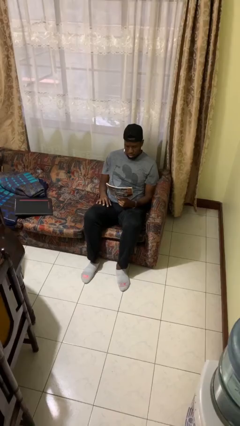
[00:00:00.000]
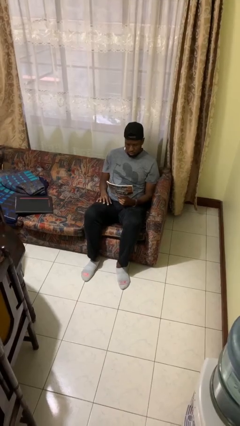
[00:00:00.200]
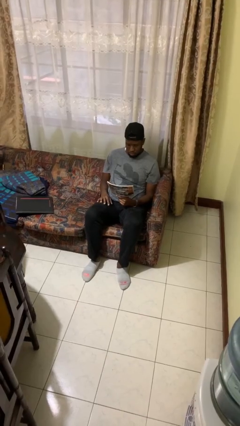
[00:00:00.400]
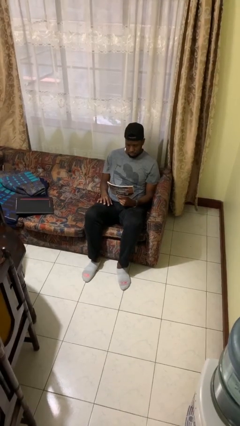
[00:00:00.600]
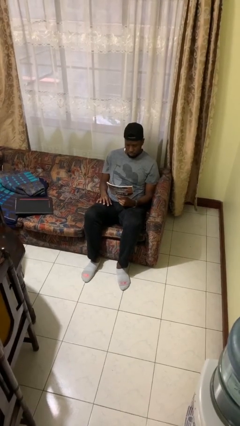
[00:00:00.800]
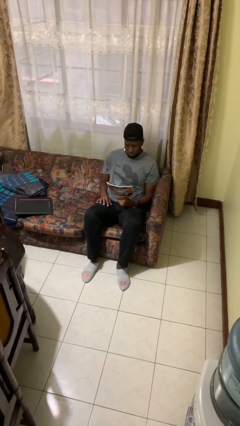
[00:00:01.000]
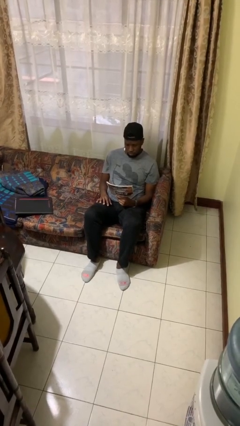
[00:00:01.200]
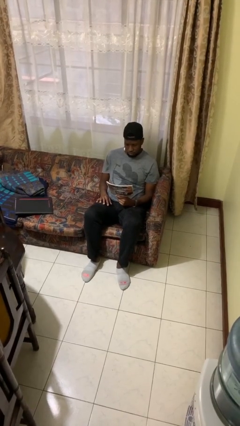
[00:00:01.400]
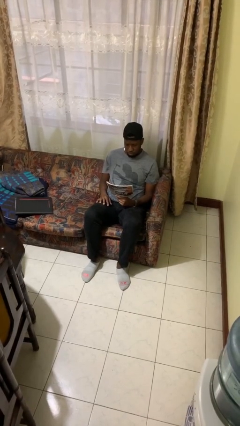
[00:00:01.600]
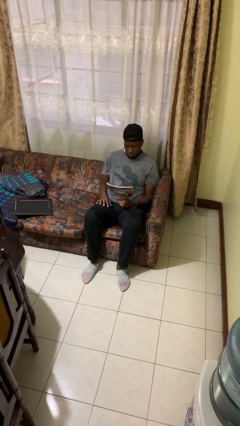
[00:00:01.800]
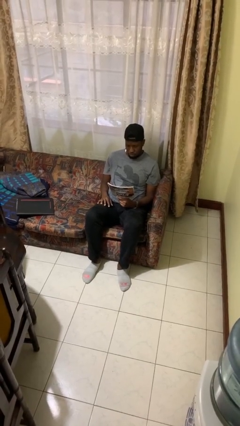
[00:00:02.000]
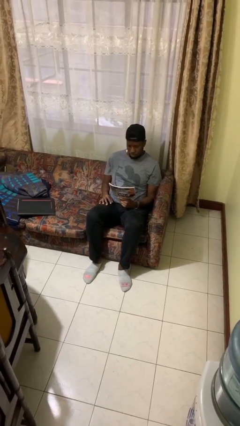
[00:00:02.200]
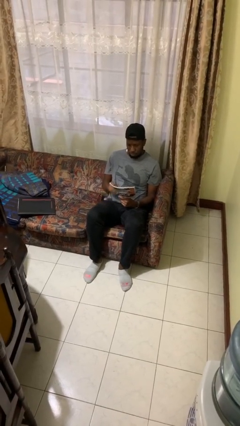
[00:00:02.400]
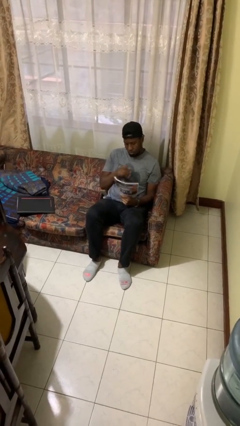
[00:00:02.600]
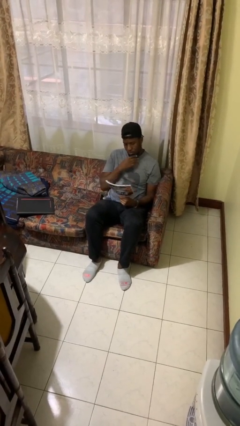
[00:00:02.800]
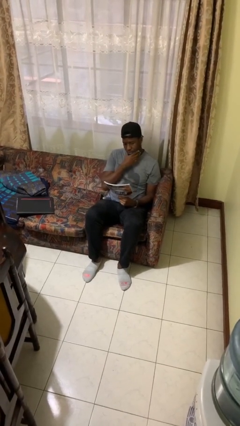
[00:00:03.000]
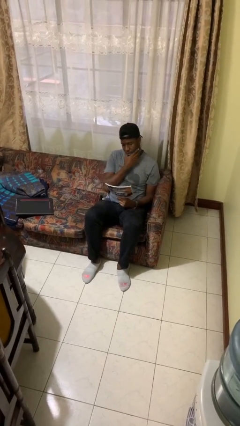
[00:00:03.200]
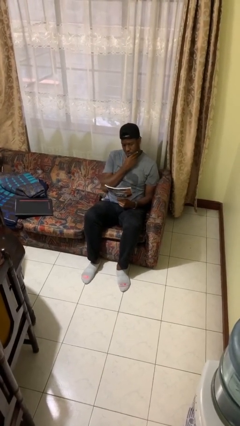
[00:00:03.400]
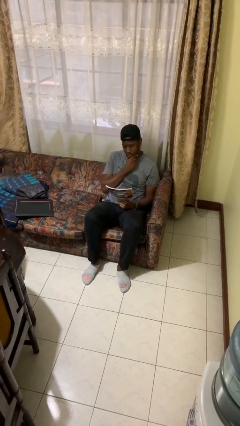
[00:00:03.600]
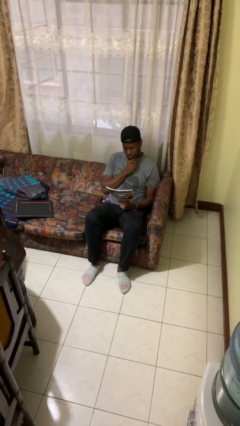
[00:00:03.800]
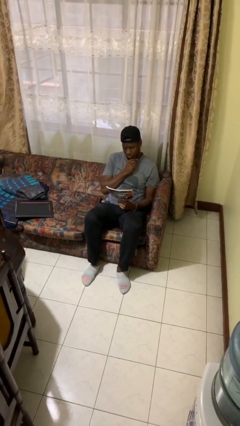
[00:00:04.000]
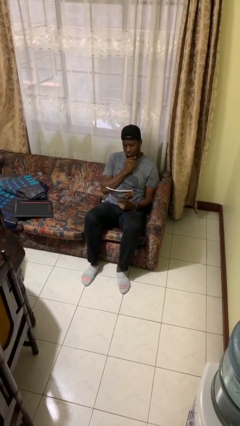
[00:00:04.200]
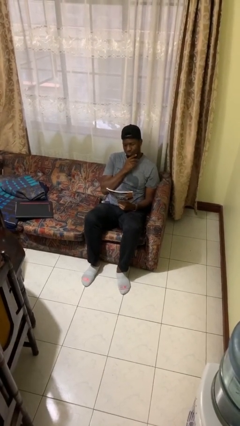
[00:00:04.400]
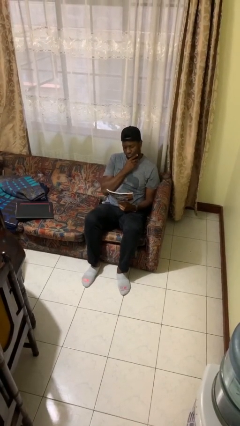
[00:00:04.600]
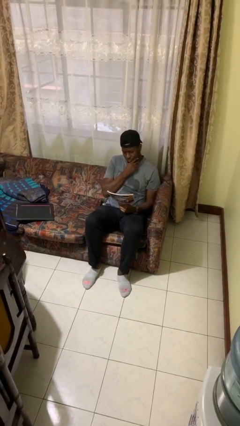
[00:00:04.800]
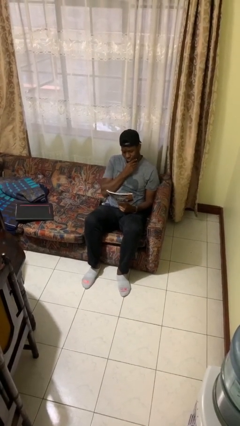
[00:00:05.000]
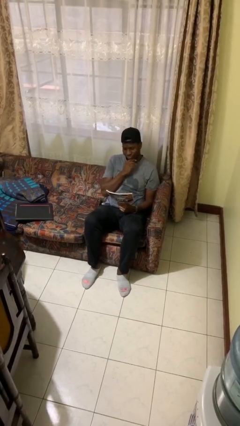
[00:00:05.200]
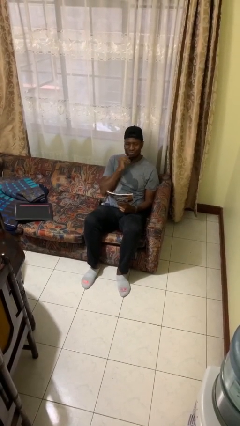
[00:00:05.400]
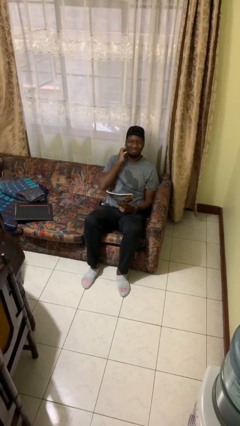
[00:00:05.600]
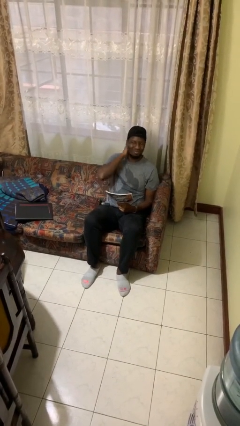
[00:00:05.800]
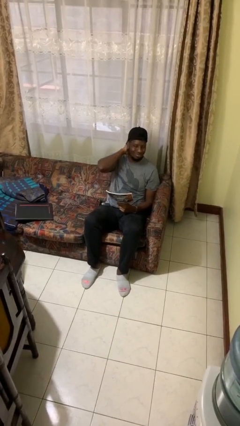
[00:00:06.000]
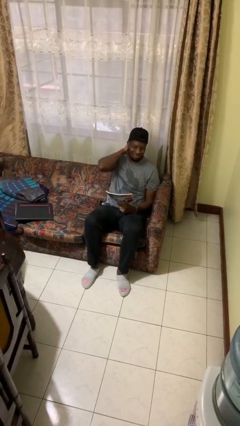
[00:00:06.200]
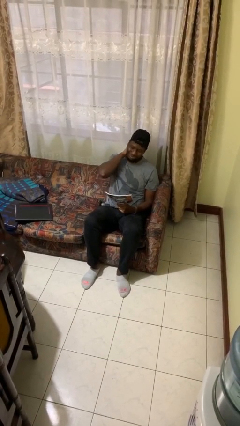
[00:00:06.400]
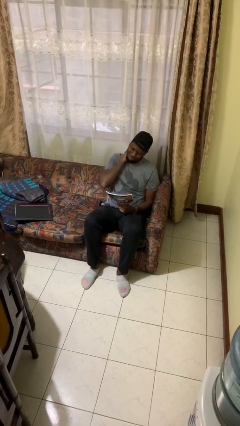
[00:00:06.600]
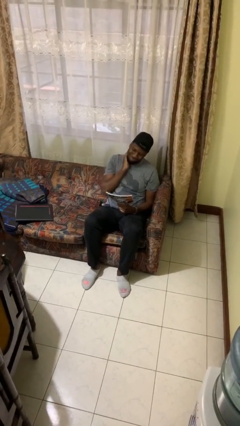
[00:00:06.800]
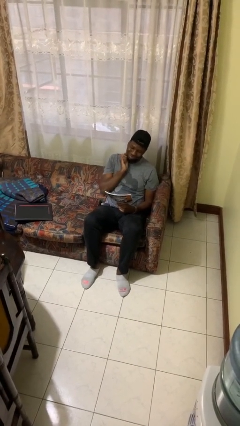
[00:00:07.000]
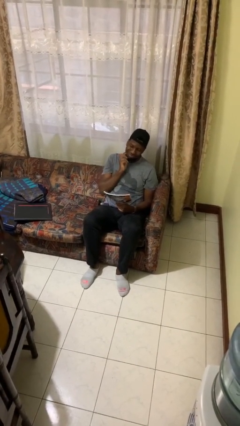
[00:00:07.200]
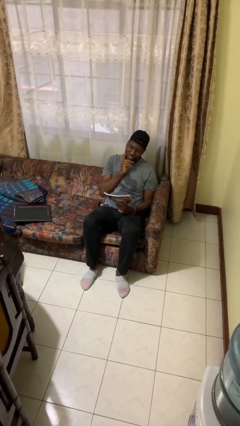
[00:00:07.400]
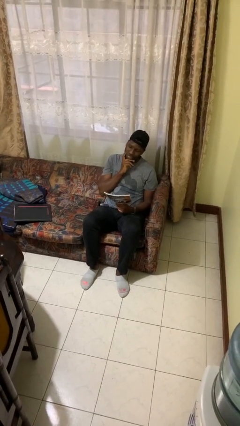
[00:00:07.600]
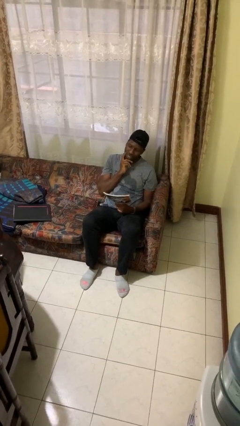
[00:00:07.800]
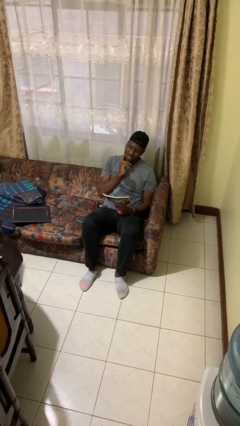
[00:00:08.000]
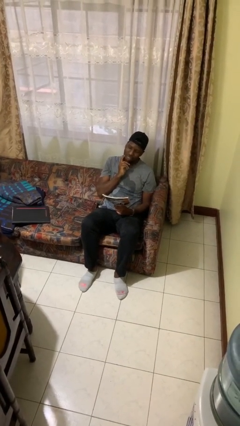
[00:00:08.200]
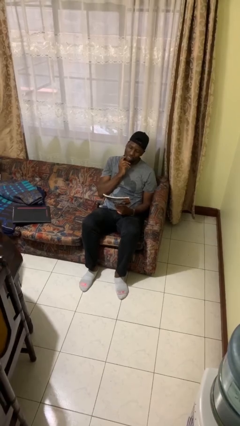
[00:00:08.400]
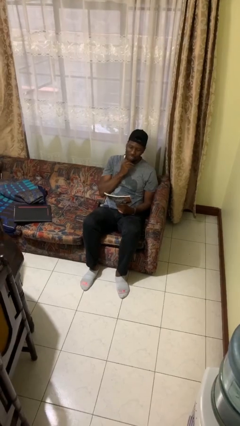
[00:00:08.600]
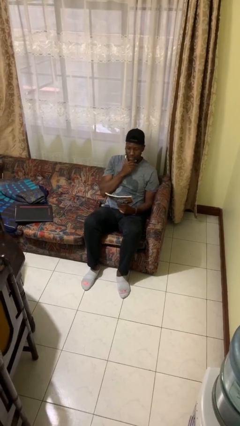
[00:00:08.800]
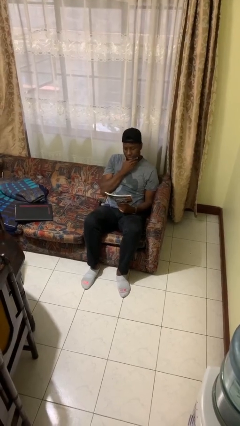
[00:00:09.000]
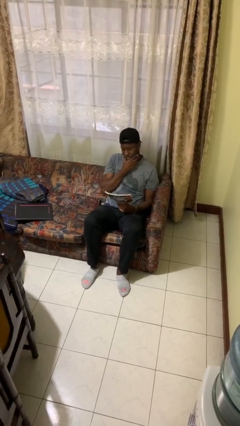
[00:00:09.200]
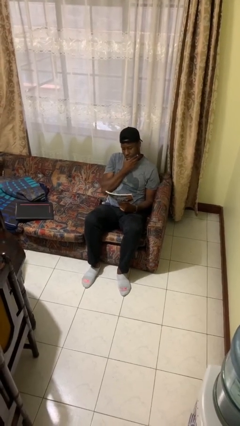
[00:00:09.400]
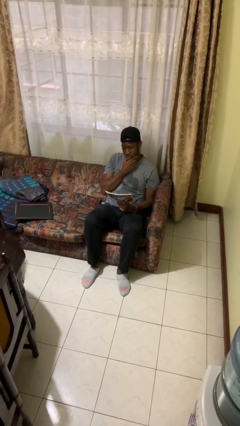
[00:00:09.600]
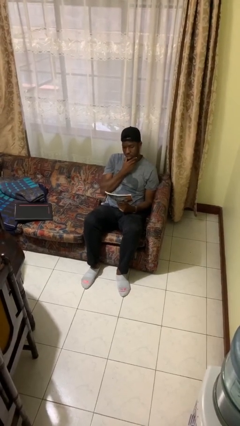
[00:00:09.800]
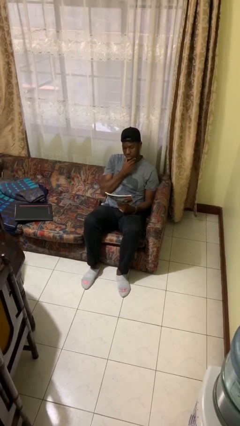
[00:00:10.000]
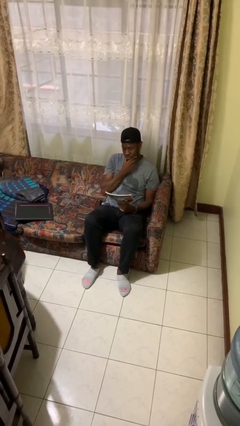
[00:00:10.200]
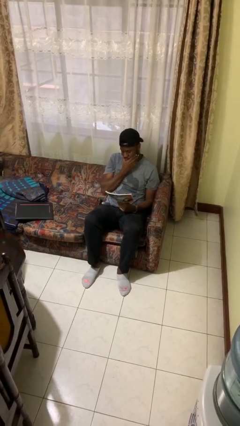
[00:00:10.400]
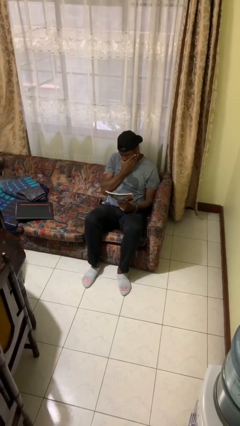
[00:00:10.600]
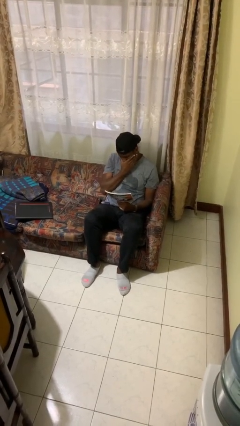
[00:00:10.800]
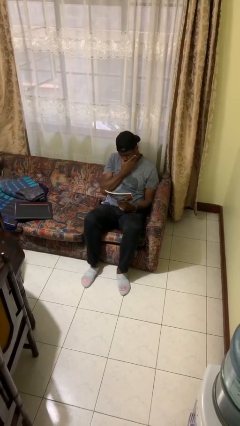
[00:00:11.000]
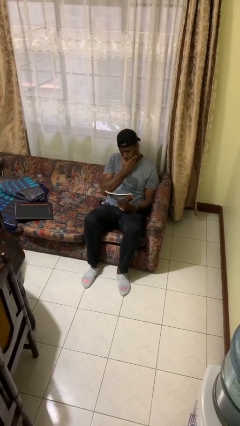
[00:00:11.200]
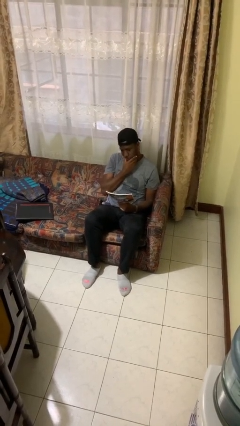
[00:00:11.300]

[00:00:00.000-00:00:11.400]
person reads document

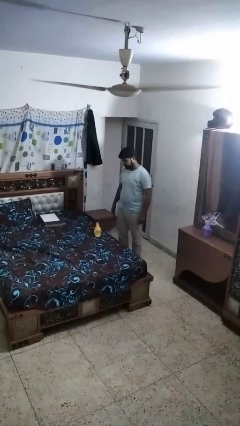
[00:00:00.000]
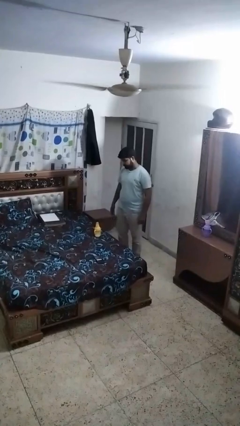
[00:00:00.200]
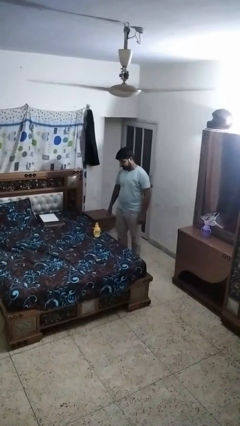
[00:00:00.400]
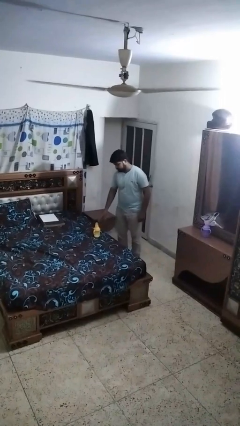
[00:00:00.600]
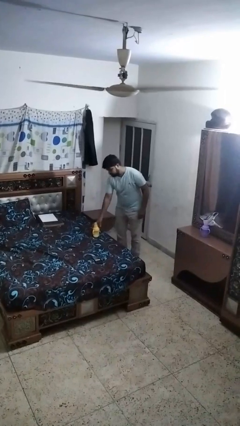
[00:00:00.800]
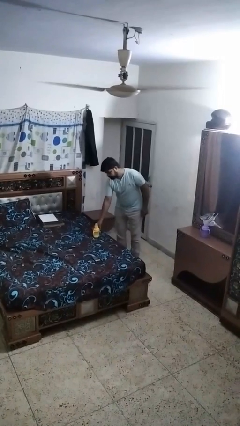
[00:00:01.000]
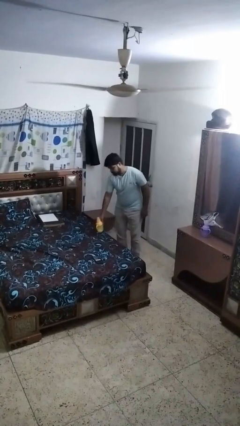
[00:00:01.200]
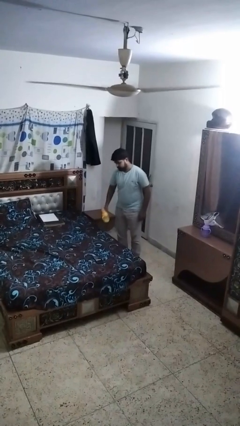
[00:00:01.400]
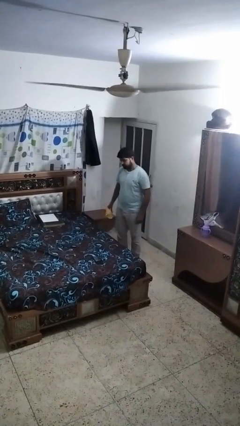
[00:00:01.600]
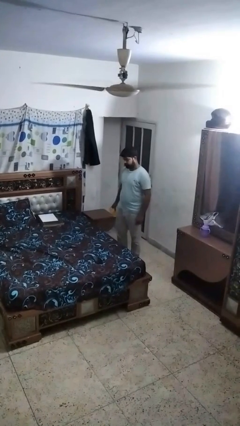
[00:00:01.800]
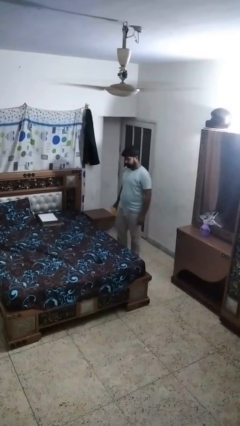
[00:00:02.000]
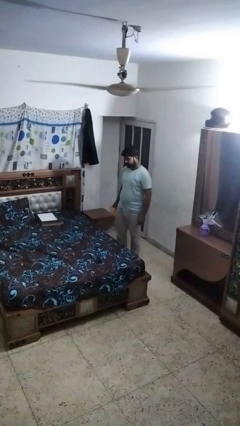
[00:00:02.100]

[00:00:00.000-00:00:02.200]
person picks up object from bed

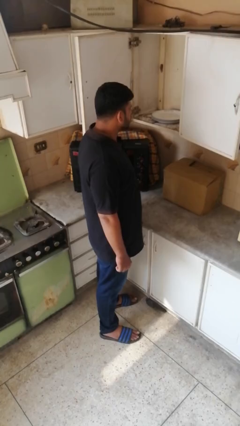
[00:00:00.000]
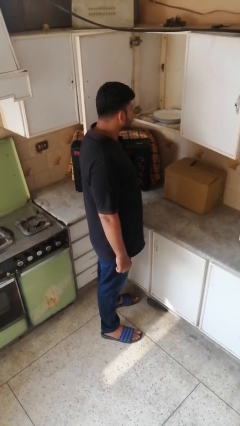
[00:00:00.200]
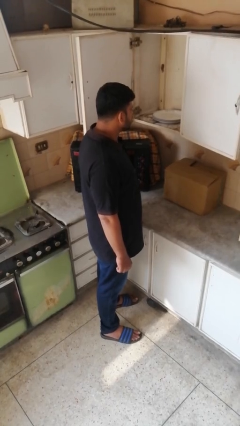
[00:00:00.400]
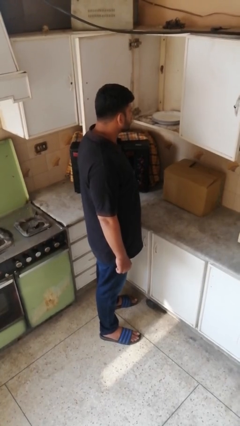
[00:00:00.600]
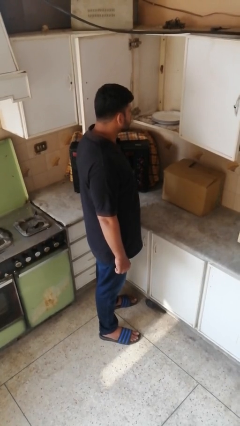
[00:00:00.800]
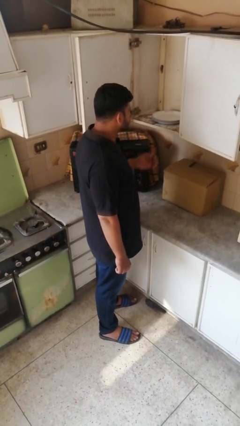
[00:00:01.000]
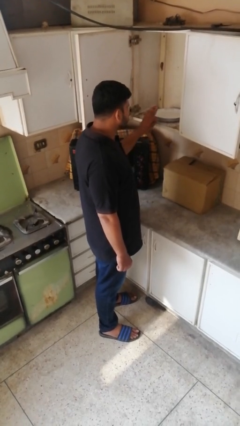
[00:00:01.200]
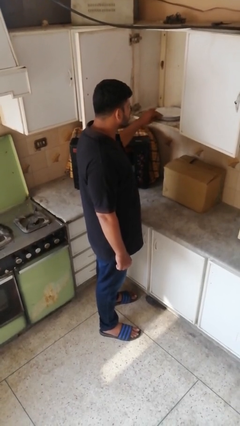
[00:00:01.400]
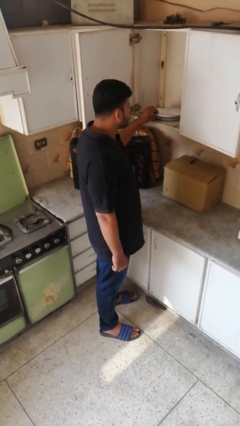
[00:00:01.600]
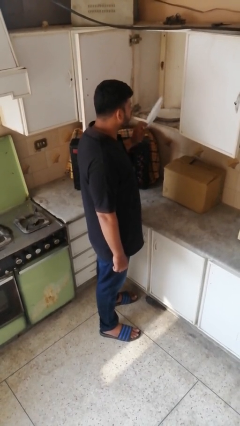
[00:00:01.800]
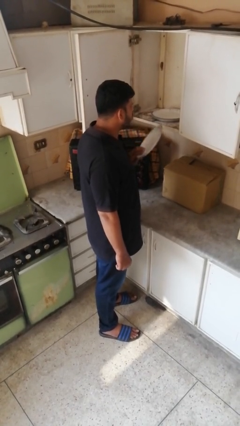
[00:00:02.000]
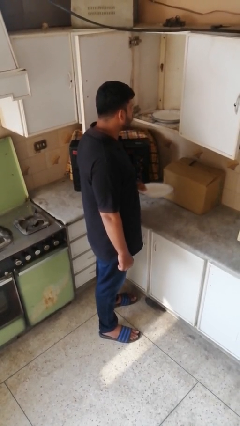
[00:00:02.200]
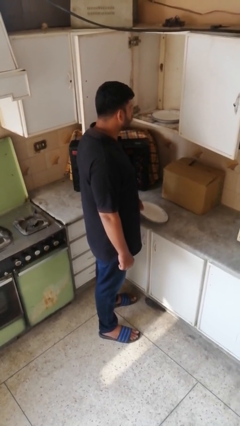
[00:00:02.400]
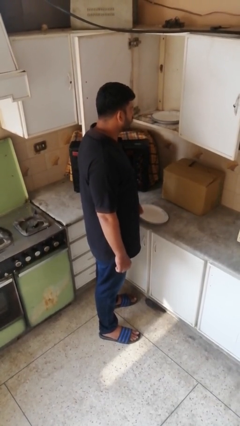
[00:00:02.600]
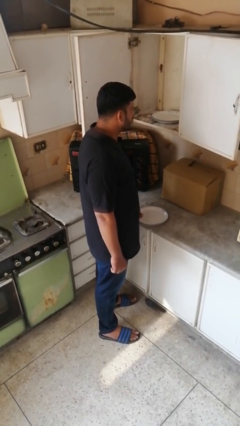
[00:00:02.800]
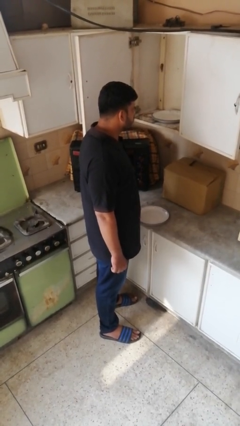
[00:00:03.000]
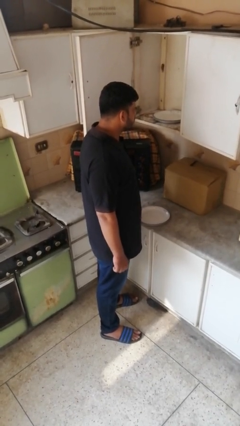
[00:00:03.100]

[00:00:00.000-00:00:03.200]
person takes object from cabinet

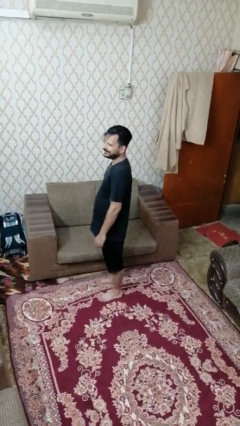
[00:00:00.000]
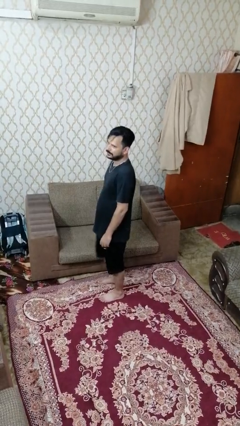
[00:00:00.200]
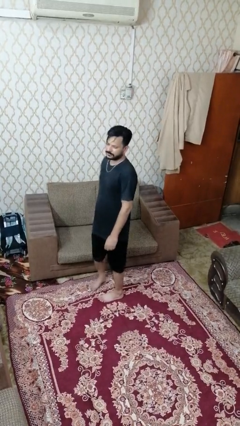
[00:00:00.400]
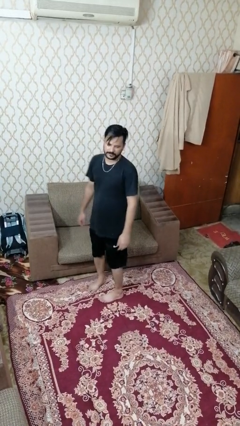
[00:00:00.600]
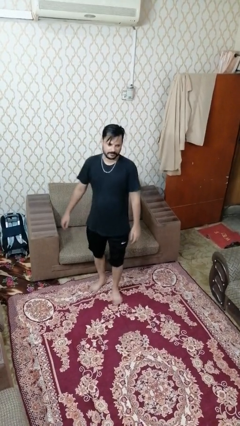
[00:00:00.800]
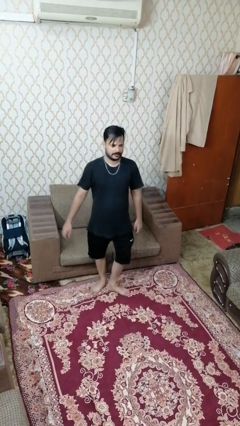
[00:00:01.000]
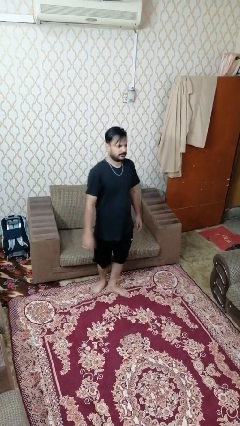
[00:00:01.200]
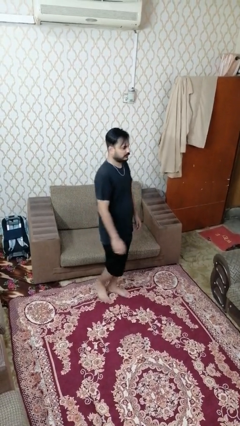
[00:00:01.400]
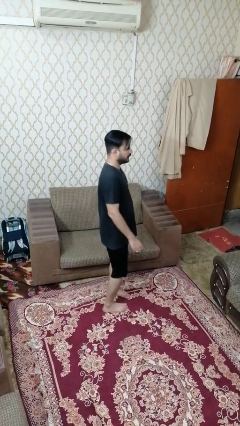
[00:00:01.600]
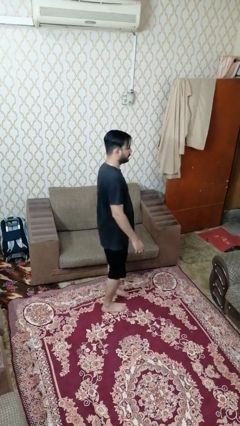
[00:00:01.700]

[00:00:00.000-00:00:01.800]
person twirls
